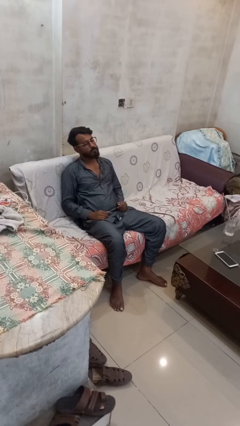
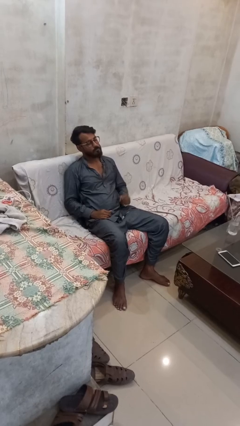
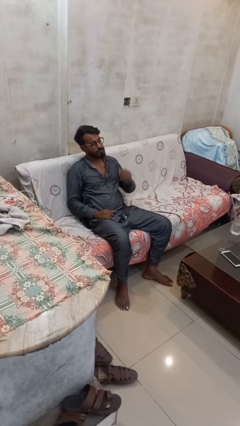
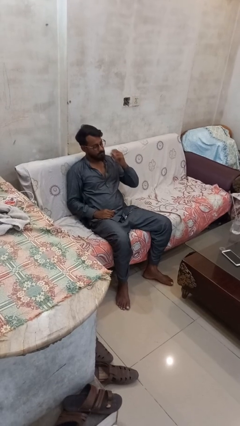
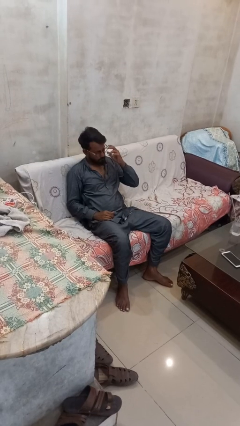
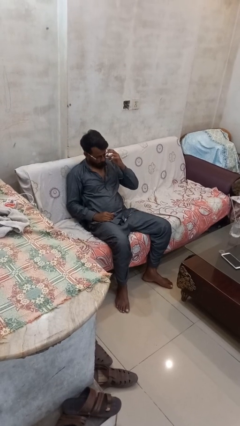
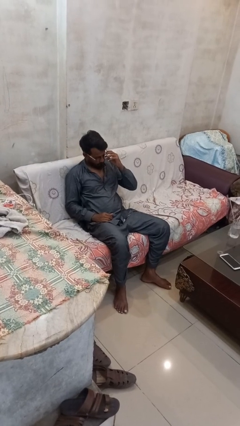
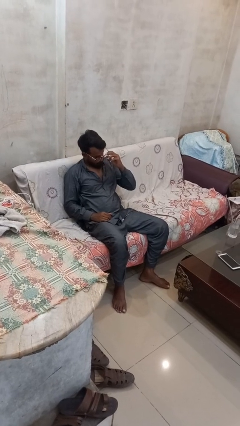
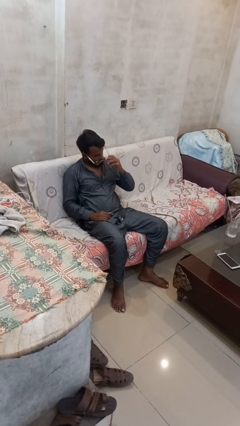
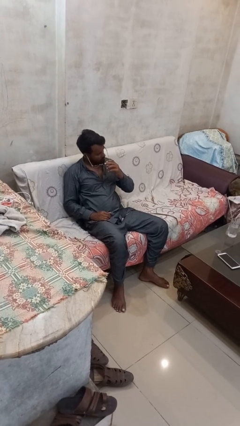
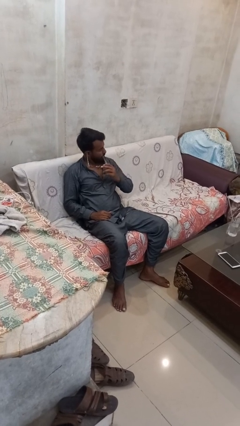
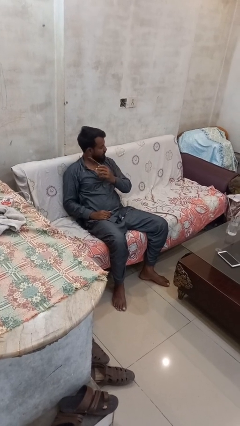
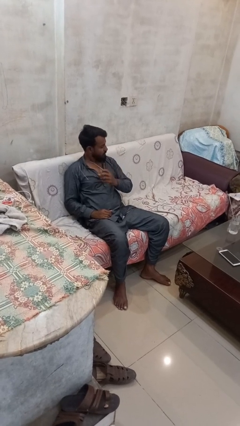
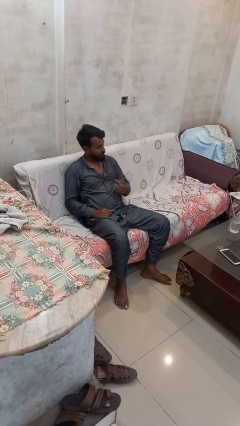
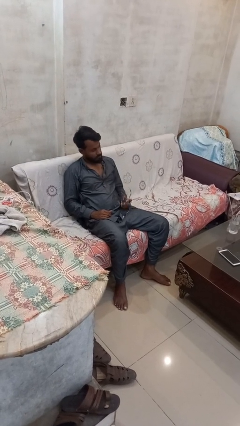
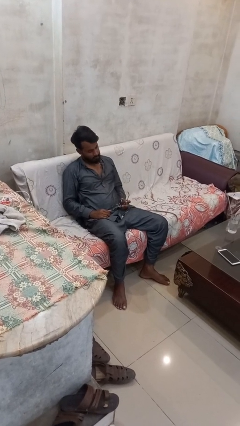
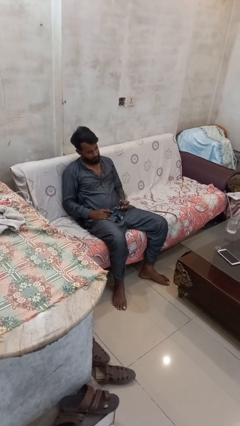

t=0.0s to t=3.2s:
person takes off glasses

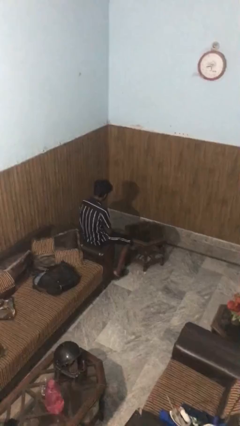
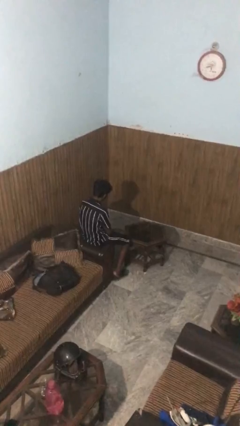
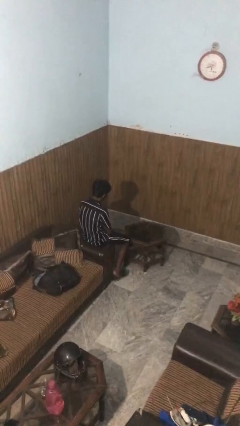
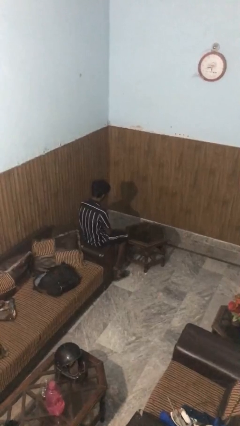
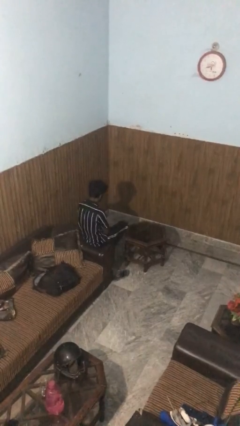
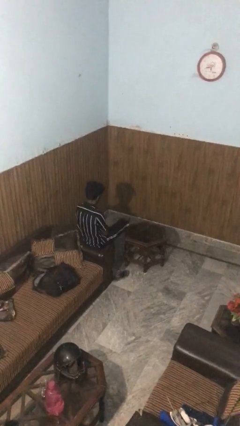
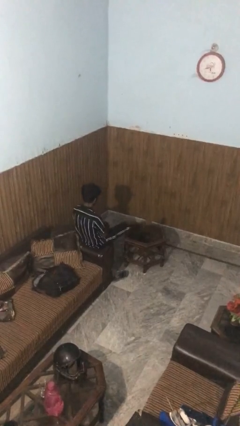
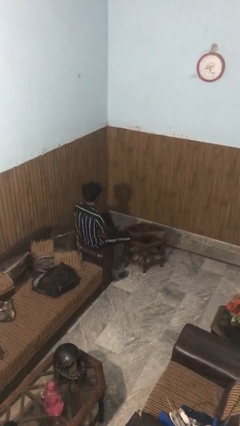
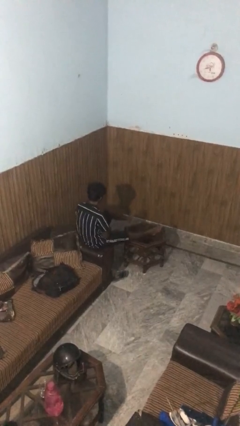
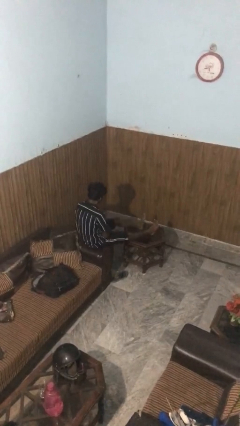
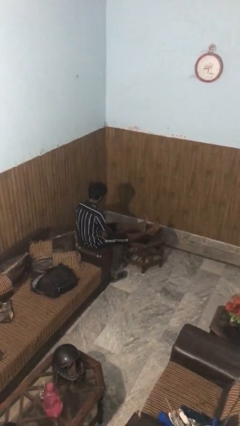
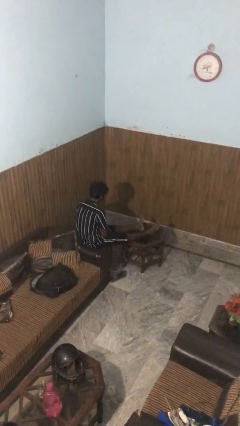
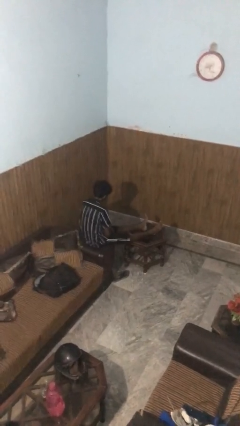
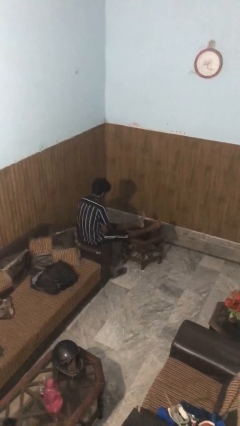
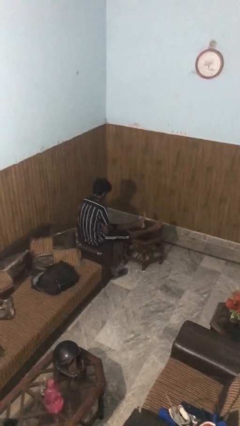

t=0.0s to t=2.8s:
person puts feet up

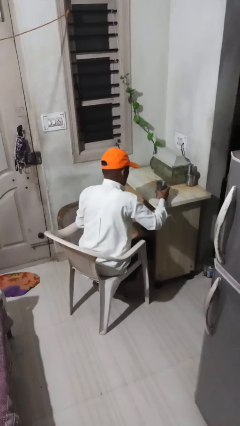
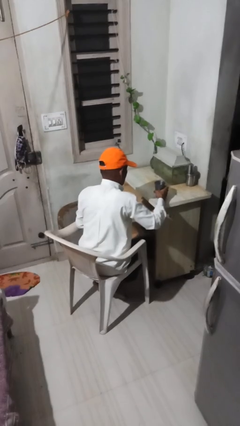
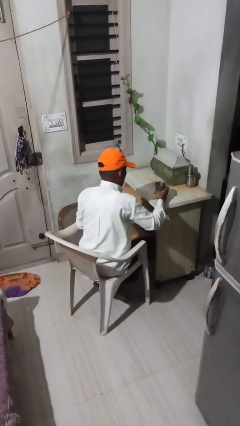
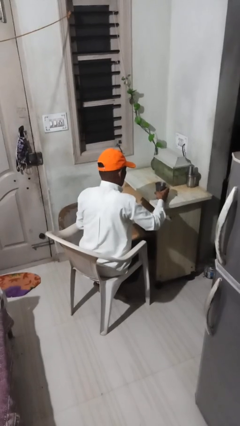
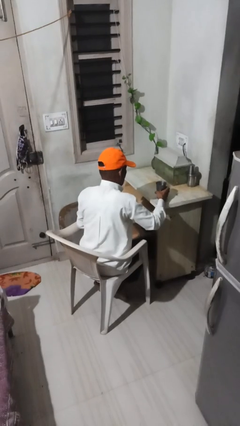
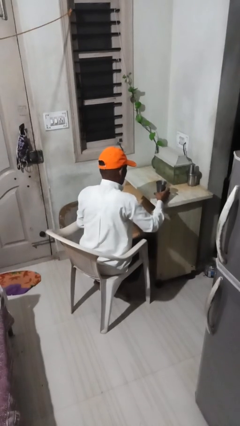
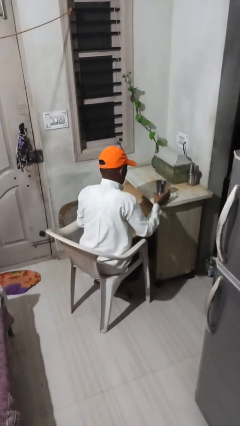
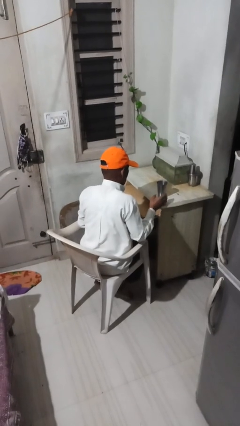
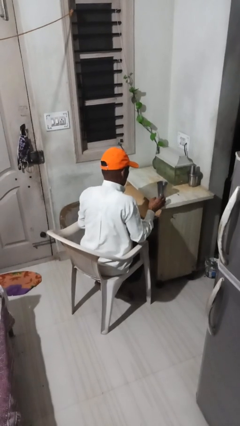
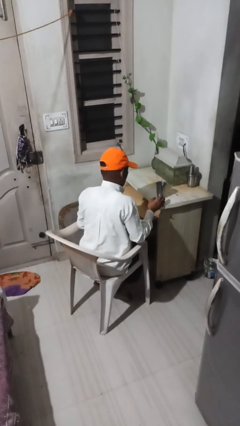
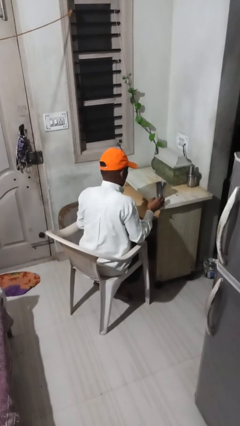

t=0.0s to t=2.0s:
person sets upright glass

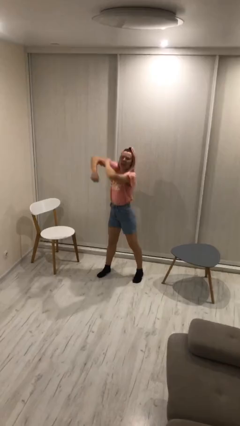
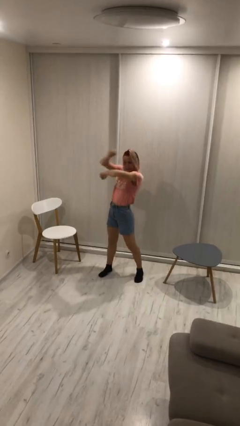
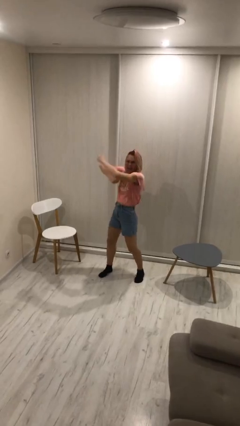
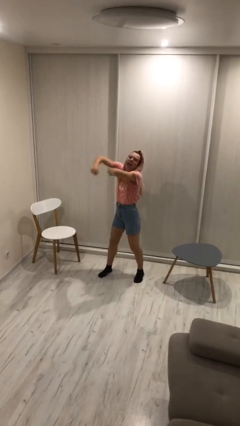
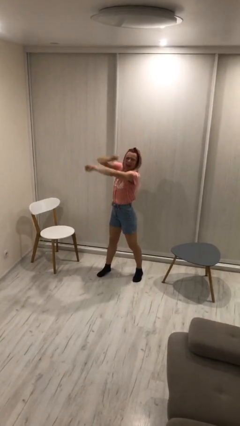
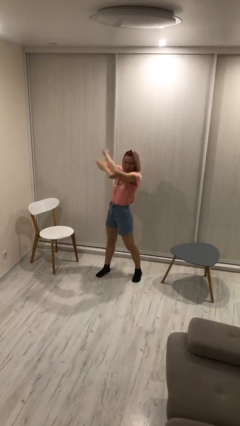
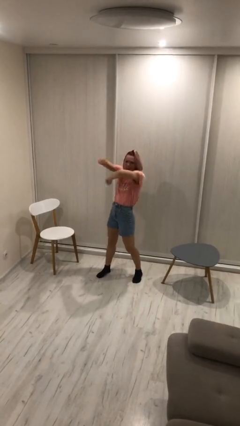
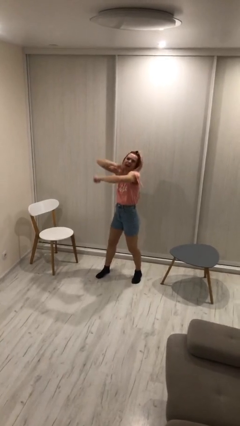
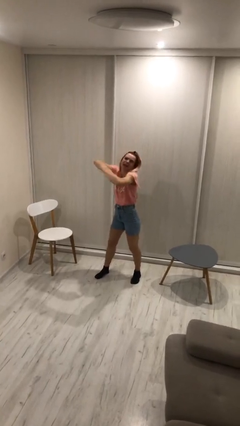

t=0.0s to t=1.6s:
person dances in place

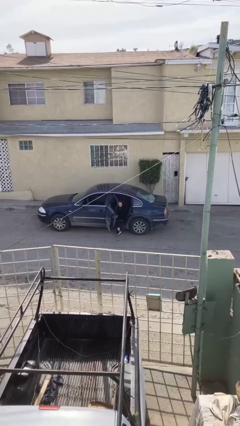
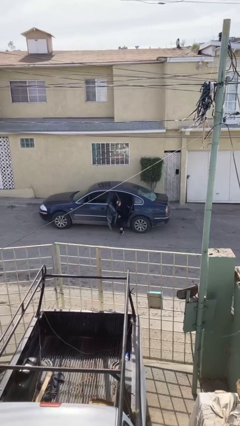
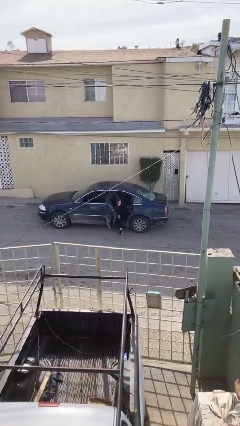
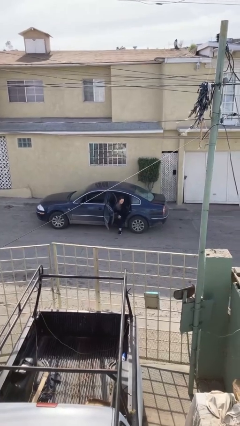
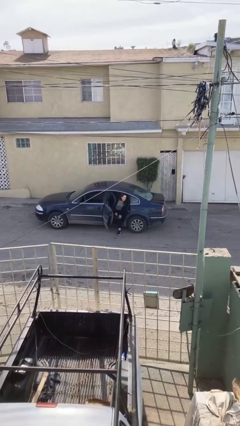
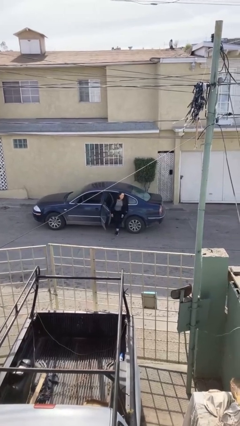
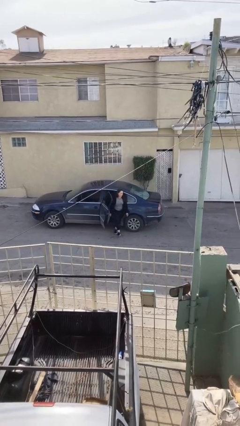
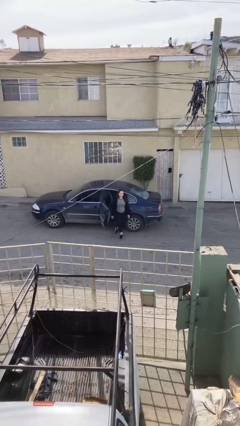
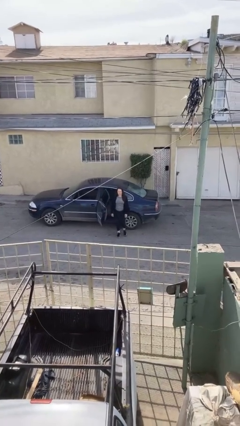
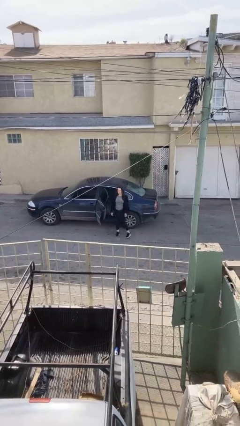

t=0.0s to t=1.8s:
person exits car

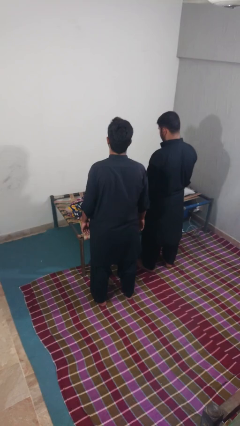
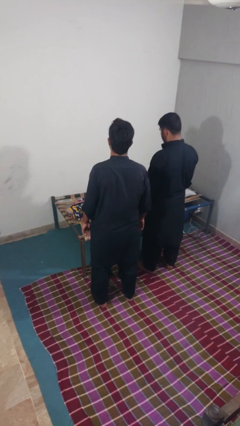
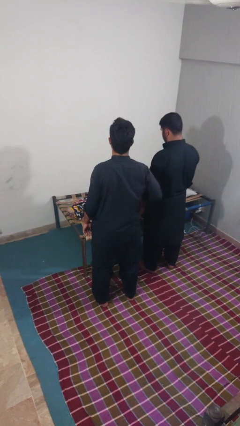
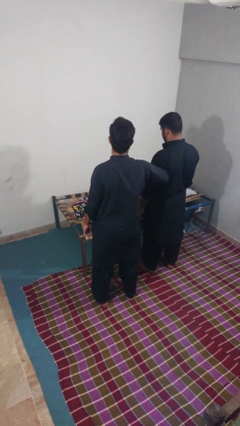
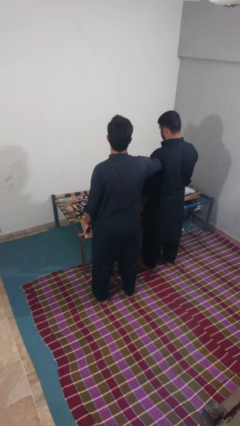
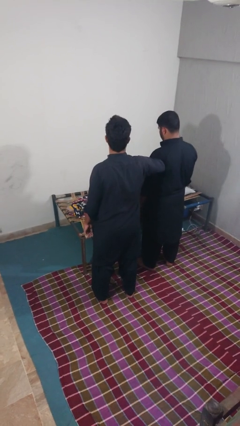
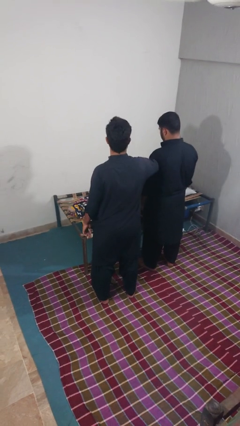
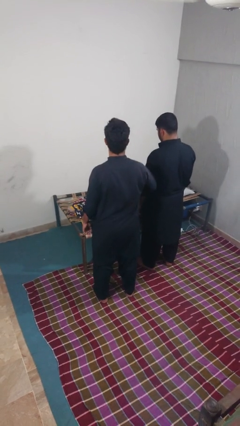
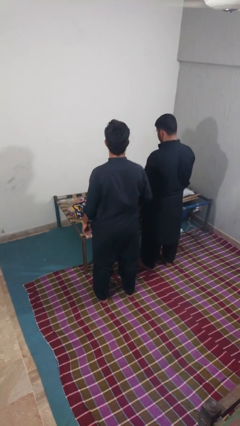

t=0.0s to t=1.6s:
person nudges person with elbow

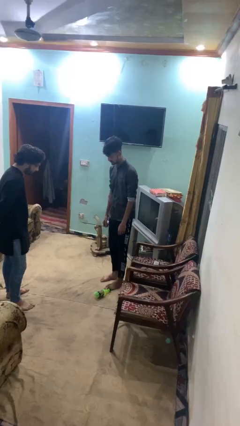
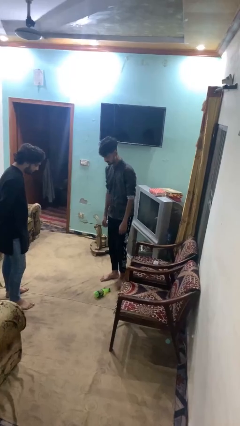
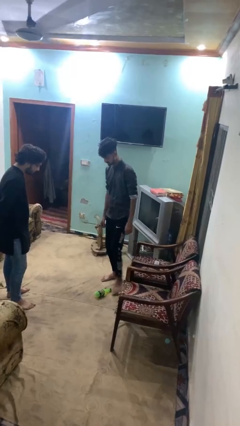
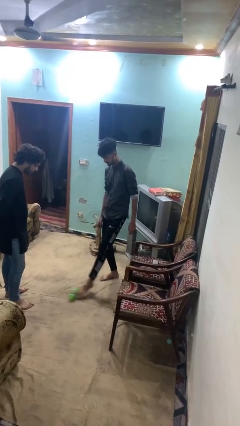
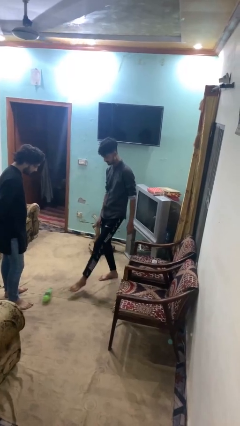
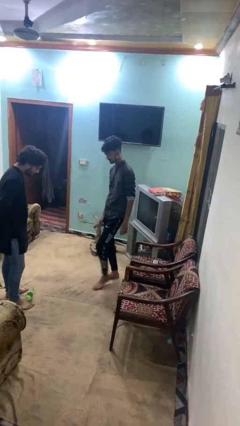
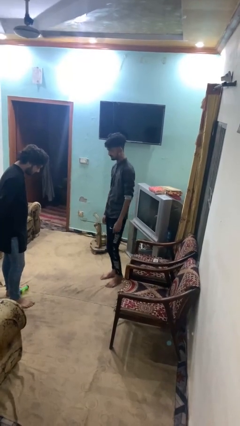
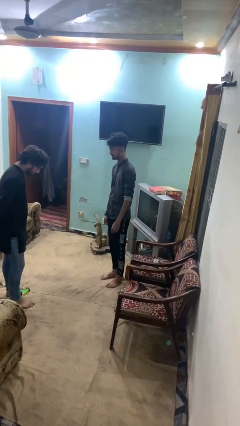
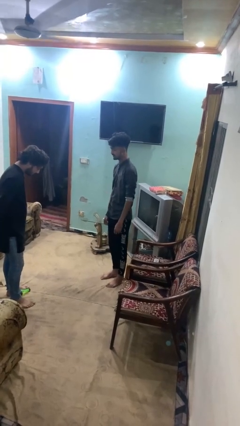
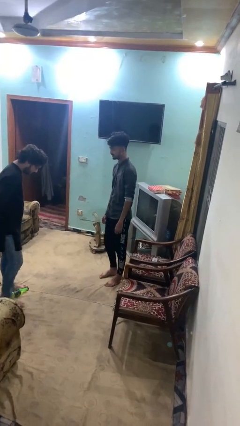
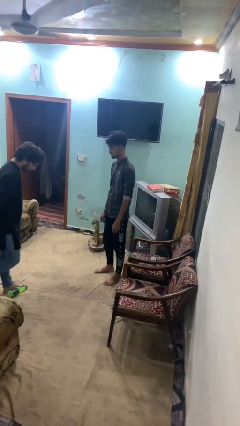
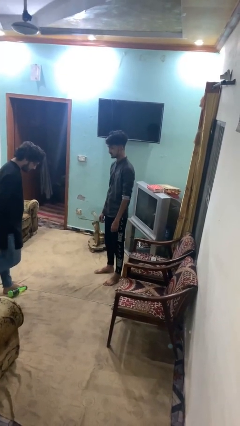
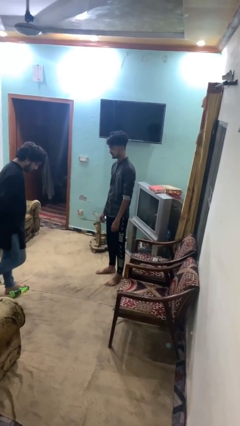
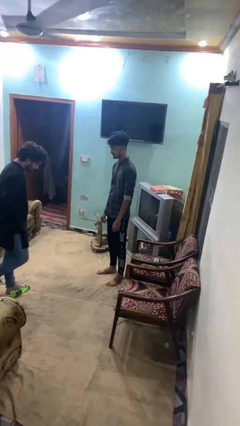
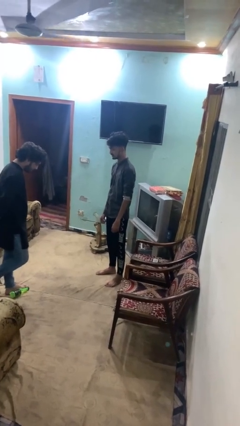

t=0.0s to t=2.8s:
person kicks object to person

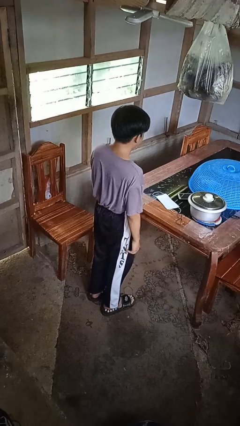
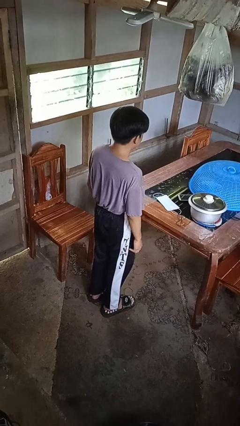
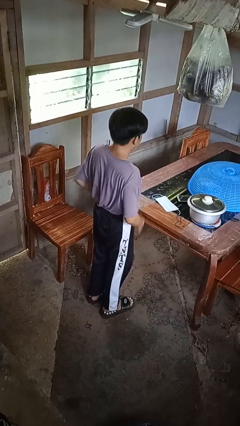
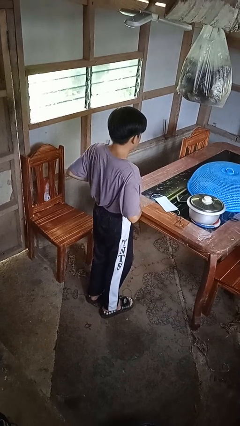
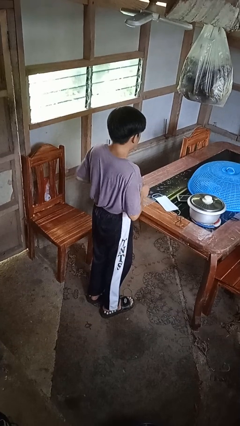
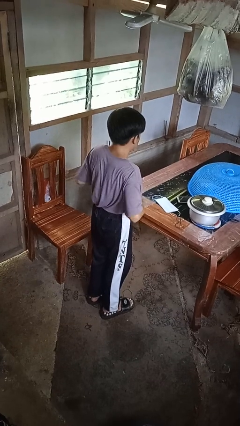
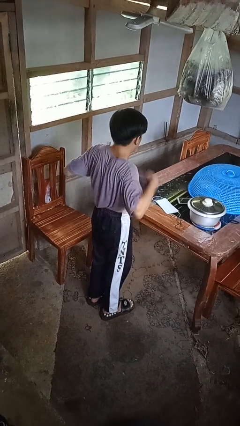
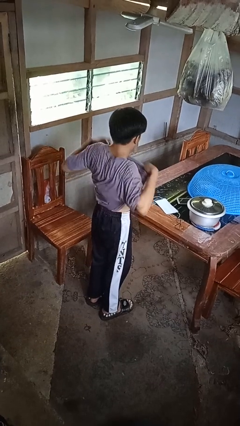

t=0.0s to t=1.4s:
person untucks shirt
